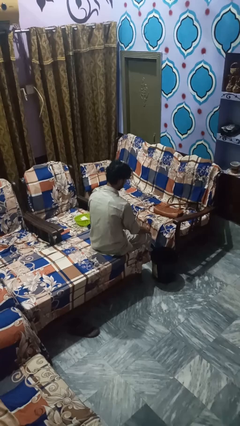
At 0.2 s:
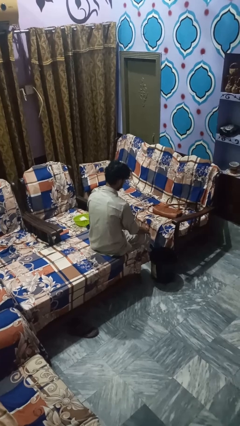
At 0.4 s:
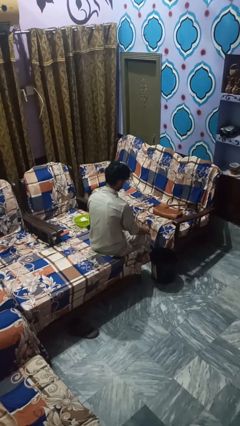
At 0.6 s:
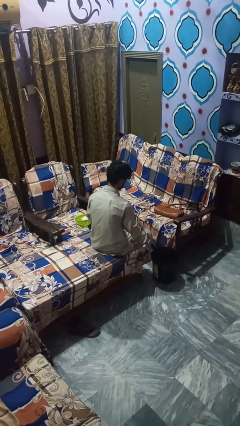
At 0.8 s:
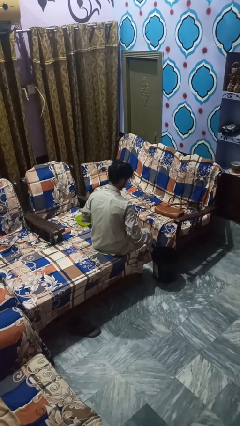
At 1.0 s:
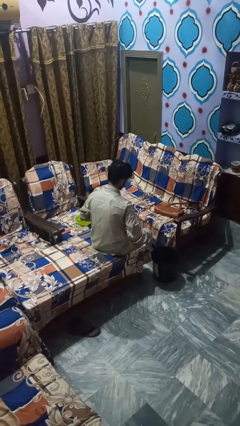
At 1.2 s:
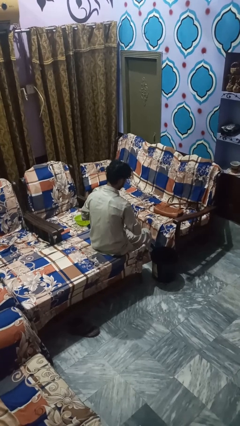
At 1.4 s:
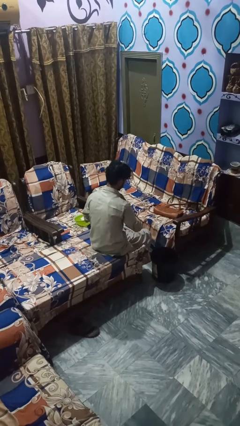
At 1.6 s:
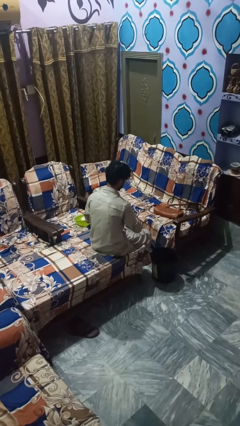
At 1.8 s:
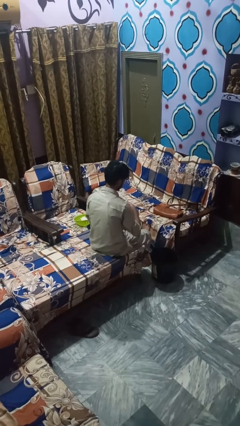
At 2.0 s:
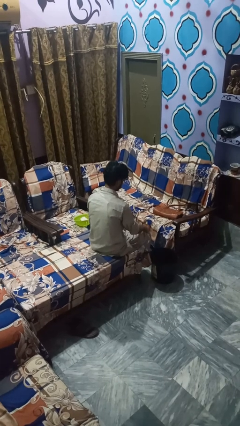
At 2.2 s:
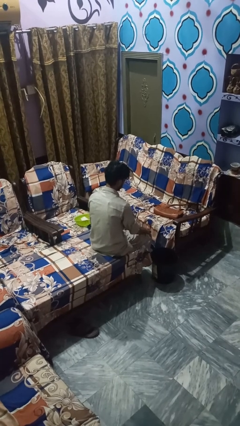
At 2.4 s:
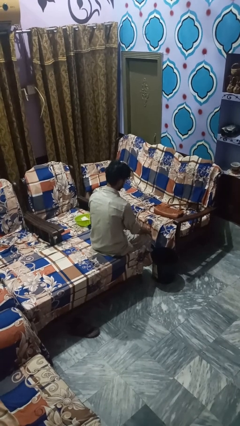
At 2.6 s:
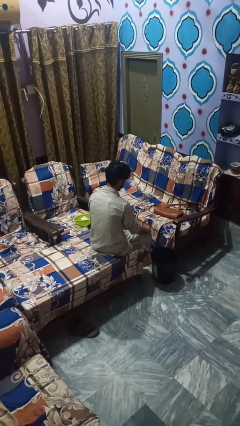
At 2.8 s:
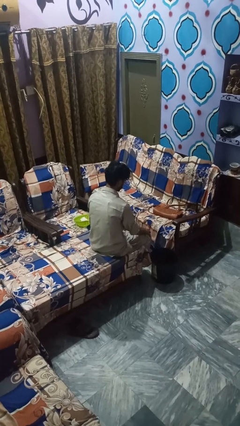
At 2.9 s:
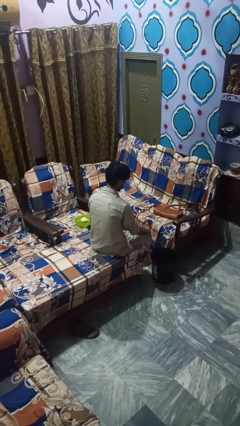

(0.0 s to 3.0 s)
person unbuttons shirt

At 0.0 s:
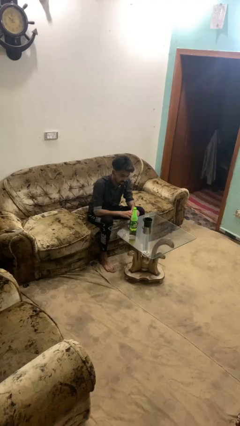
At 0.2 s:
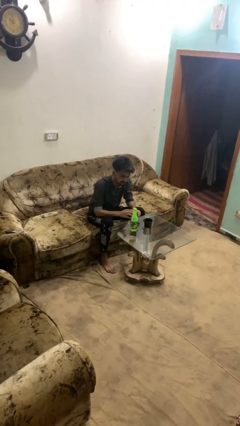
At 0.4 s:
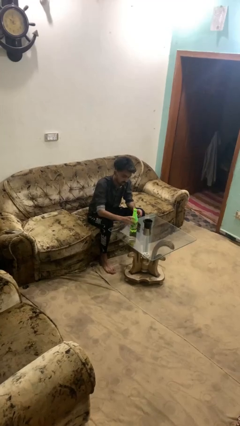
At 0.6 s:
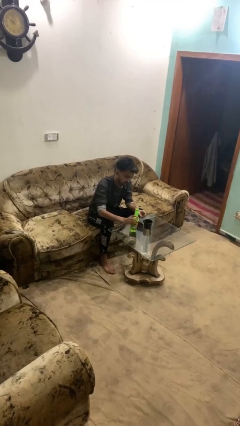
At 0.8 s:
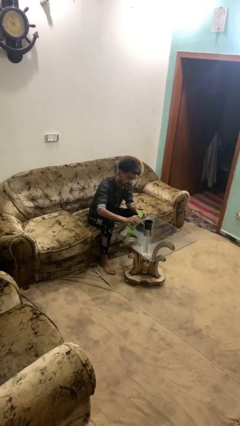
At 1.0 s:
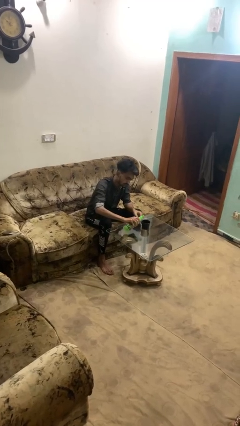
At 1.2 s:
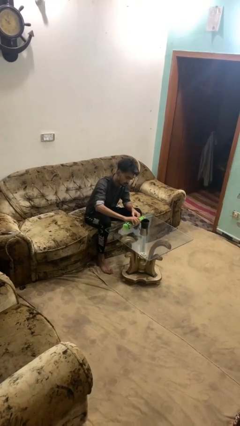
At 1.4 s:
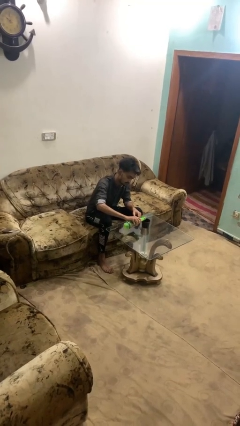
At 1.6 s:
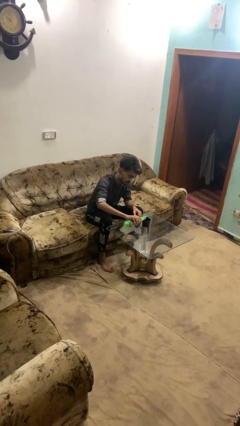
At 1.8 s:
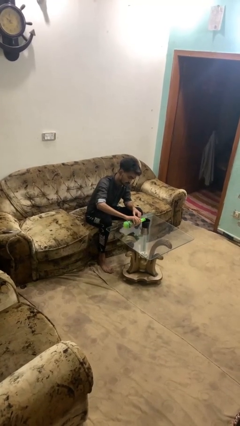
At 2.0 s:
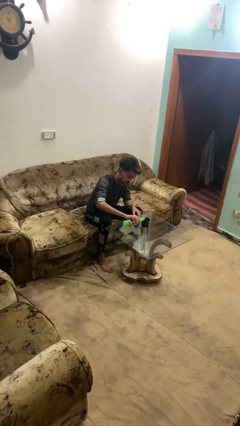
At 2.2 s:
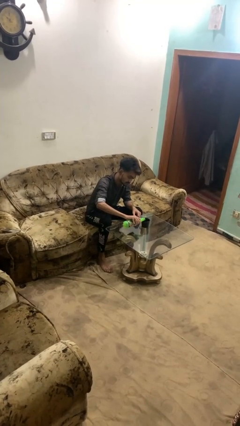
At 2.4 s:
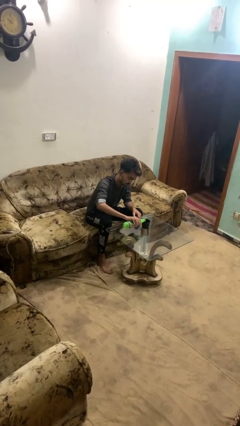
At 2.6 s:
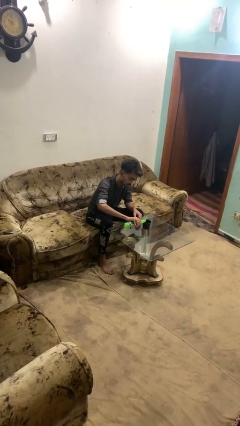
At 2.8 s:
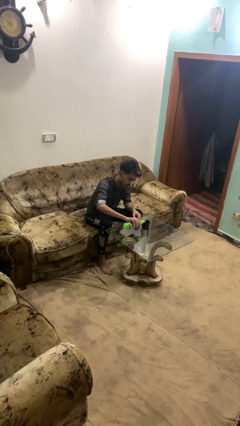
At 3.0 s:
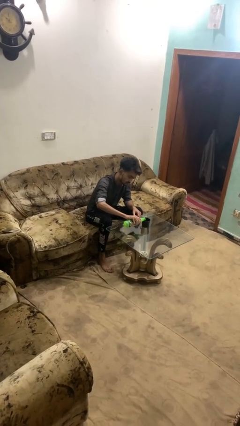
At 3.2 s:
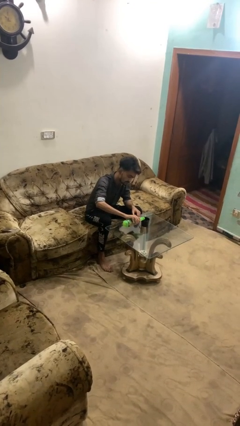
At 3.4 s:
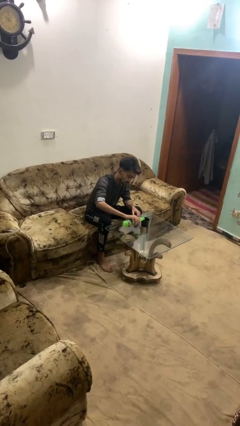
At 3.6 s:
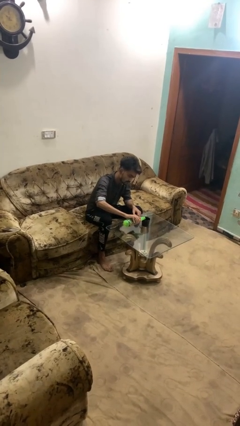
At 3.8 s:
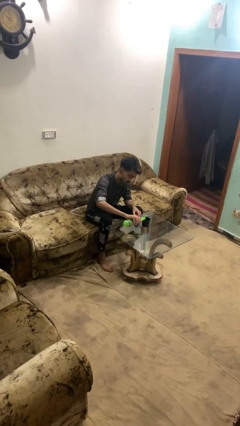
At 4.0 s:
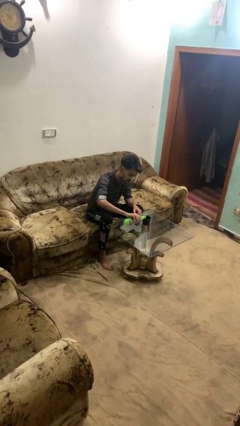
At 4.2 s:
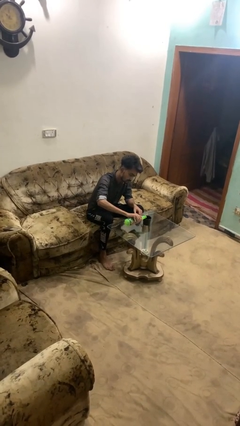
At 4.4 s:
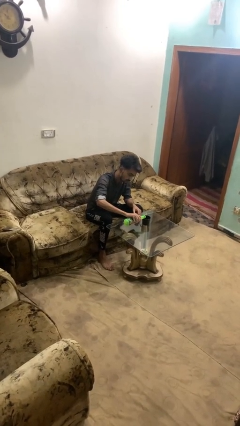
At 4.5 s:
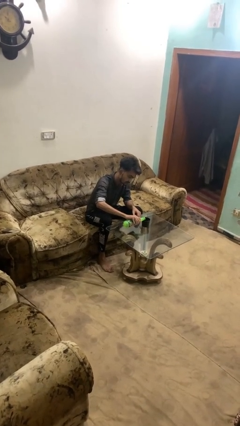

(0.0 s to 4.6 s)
person pours liquid into cup

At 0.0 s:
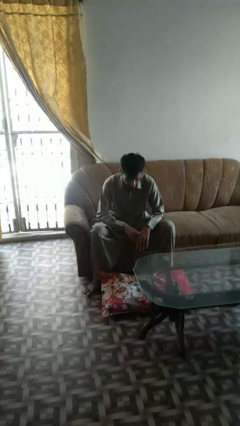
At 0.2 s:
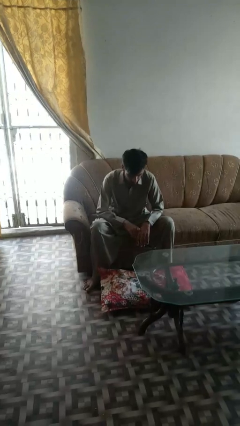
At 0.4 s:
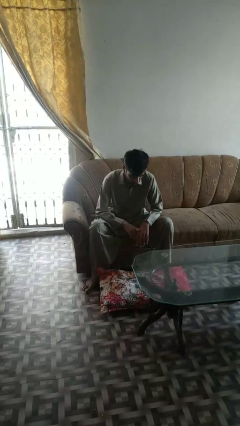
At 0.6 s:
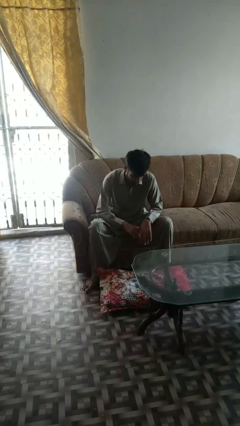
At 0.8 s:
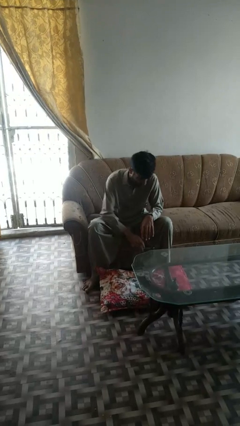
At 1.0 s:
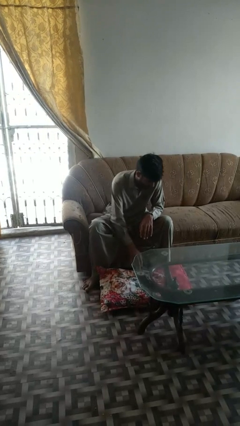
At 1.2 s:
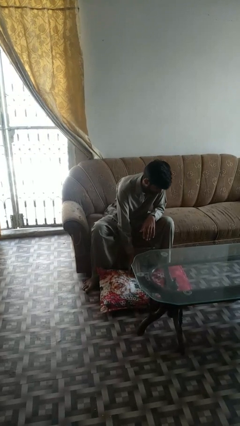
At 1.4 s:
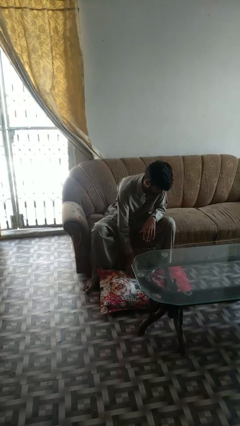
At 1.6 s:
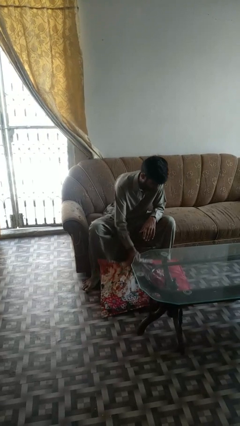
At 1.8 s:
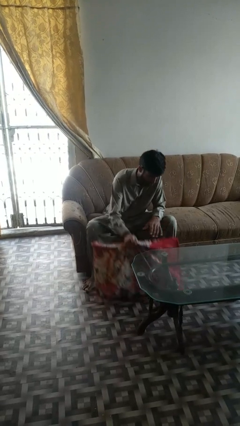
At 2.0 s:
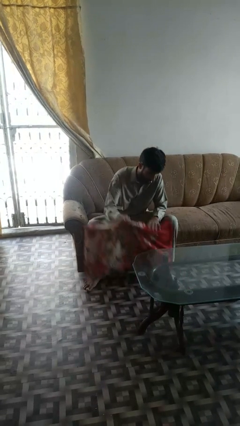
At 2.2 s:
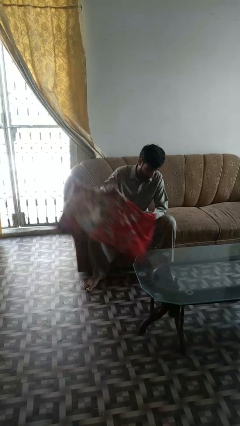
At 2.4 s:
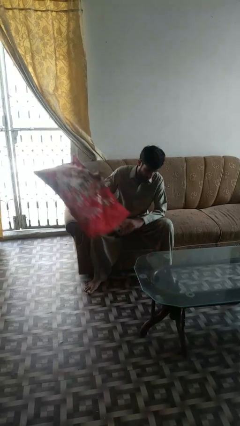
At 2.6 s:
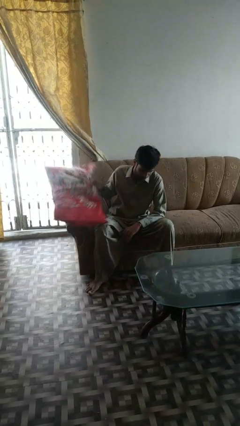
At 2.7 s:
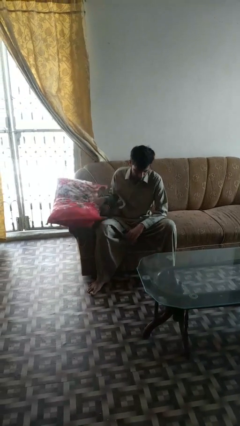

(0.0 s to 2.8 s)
person picks up object from floor

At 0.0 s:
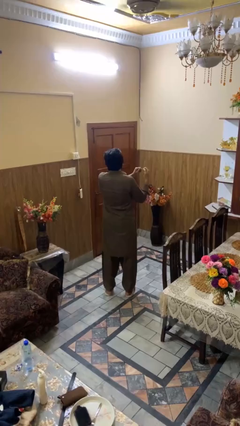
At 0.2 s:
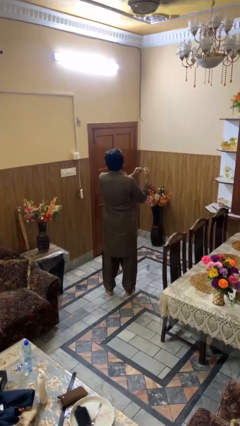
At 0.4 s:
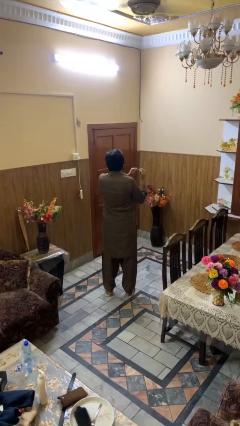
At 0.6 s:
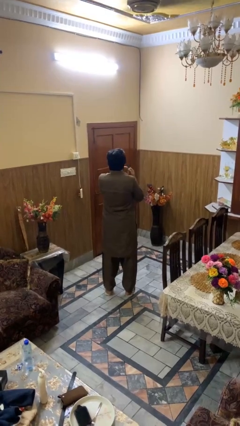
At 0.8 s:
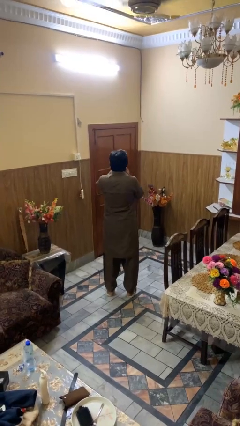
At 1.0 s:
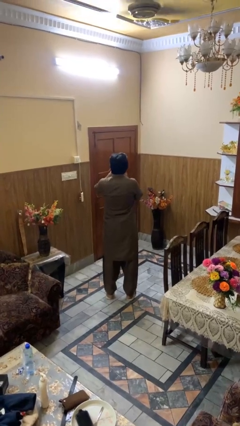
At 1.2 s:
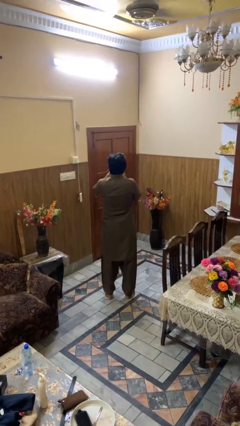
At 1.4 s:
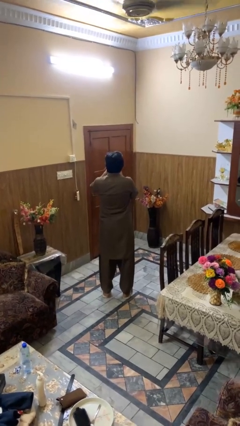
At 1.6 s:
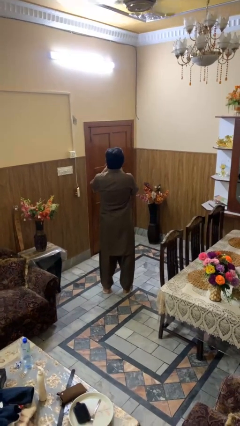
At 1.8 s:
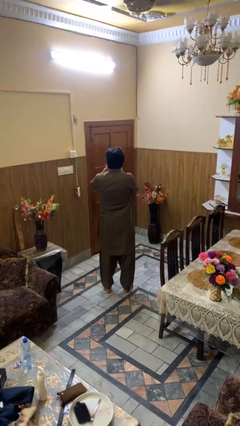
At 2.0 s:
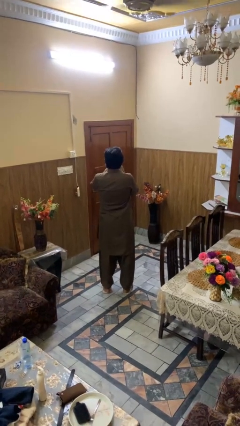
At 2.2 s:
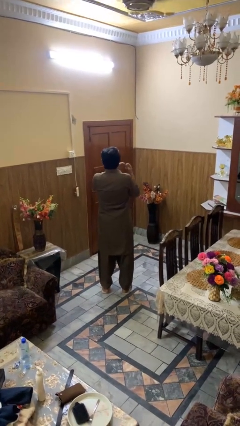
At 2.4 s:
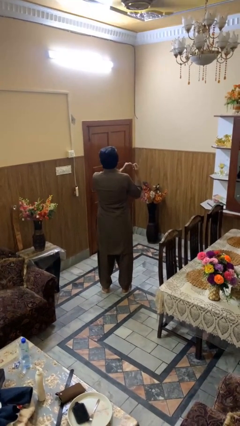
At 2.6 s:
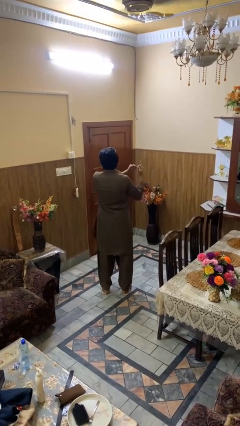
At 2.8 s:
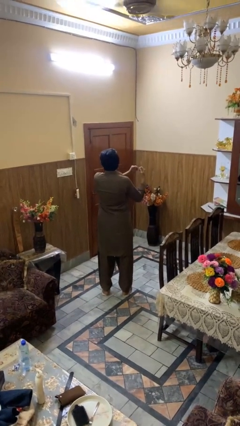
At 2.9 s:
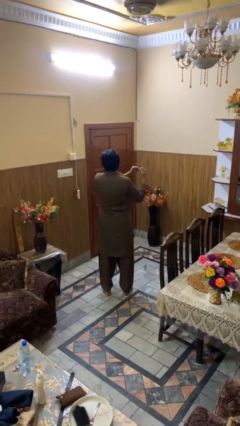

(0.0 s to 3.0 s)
person flosses

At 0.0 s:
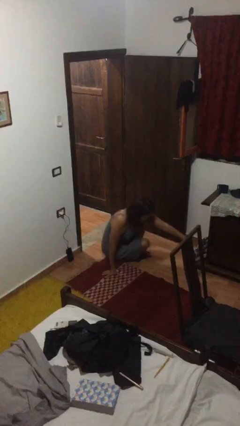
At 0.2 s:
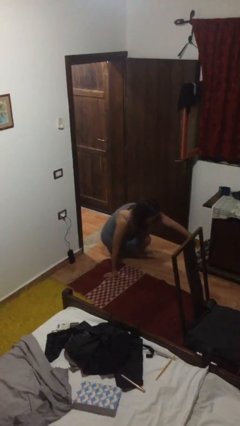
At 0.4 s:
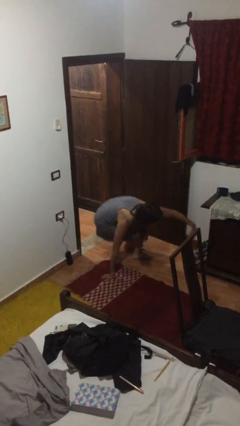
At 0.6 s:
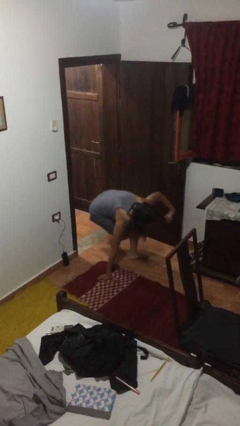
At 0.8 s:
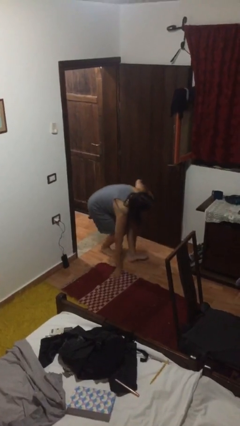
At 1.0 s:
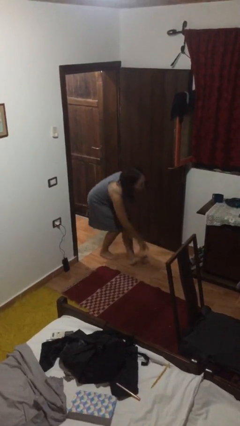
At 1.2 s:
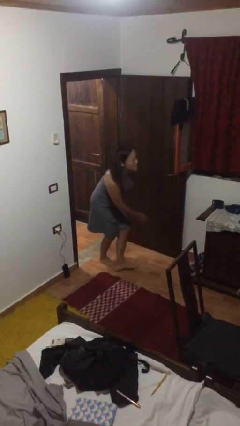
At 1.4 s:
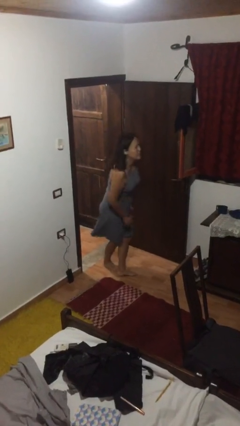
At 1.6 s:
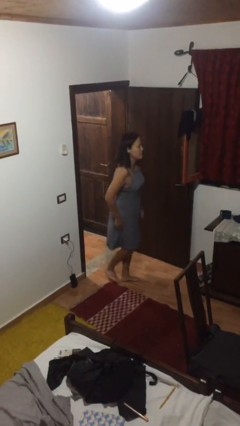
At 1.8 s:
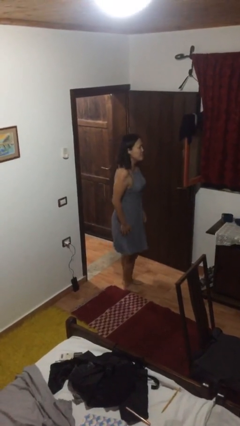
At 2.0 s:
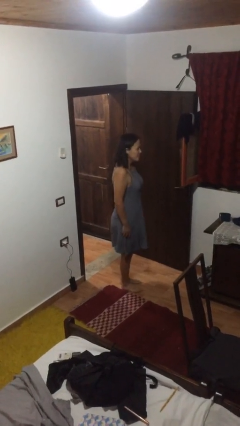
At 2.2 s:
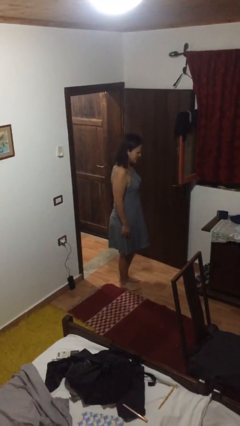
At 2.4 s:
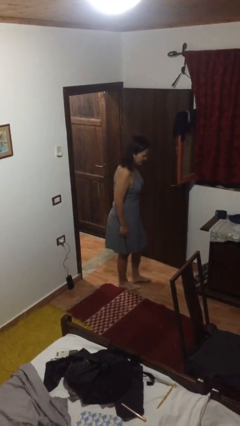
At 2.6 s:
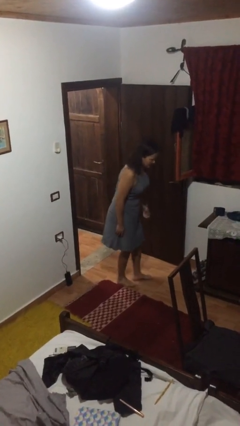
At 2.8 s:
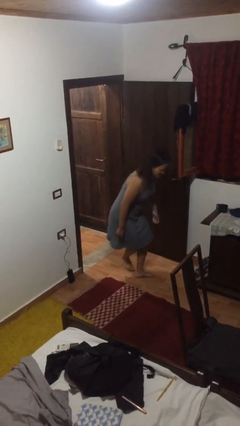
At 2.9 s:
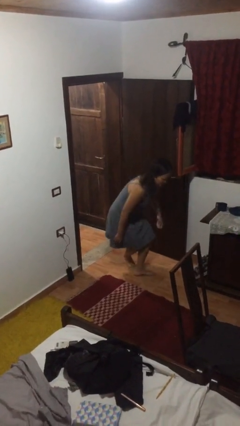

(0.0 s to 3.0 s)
person stands up from floor

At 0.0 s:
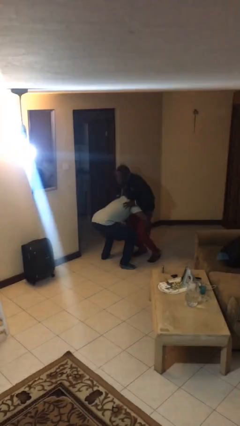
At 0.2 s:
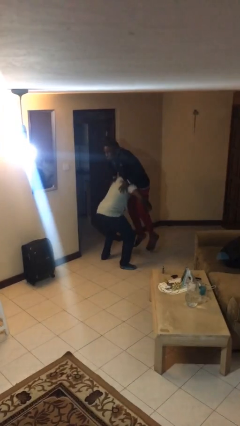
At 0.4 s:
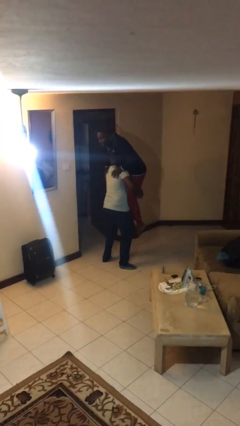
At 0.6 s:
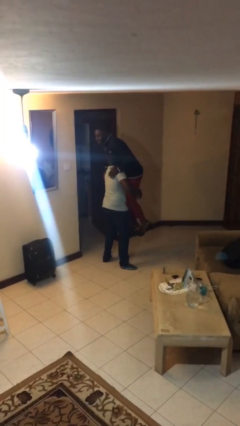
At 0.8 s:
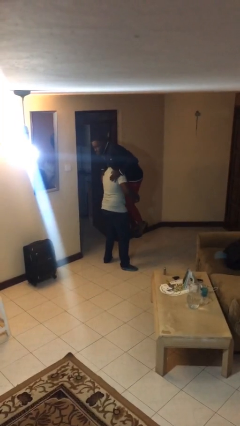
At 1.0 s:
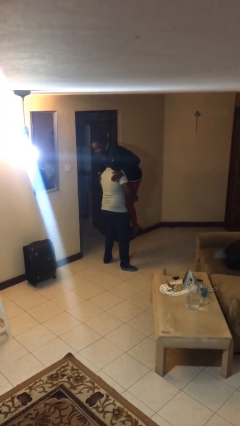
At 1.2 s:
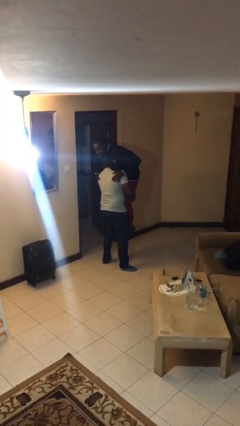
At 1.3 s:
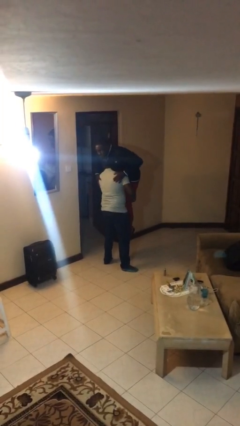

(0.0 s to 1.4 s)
person picks up person
